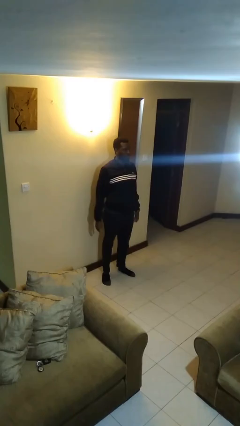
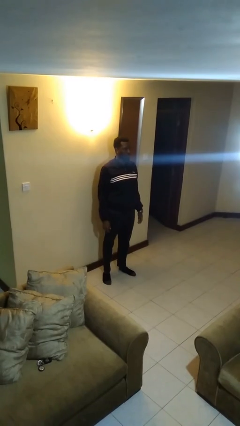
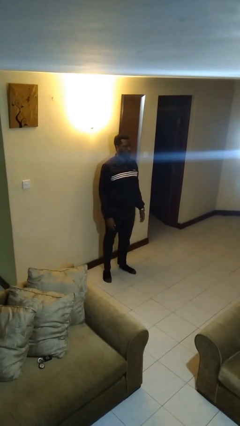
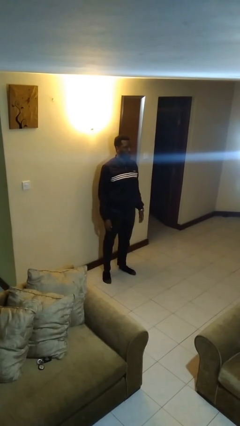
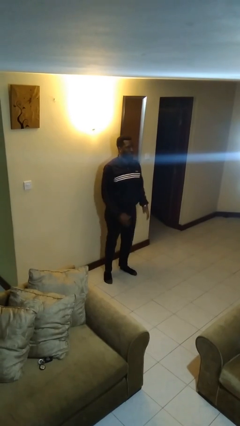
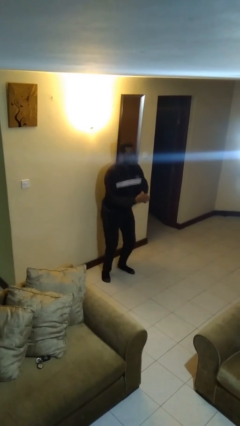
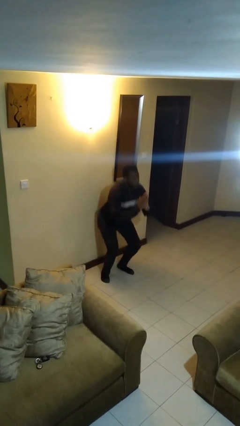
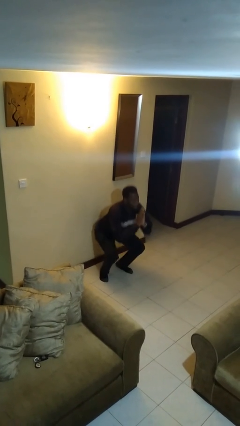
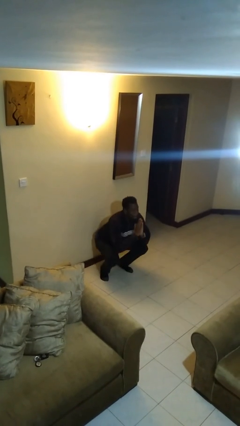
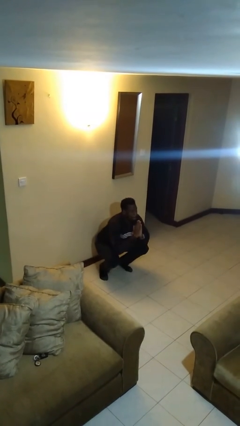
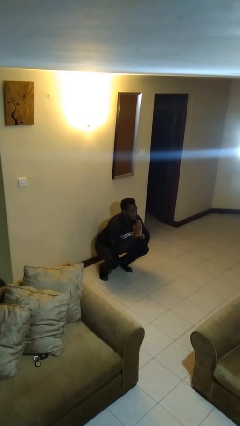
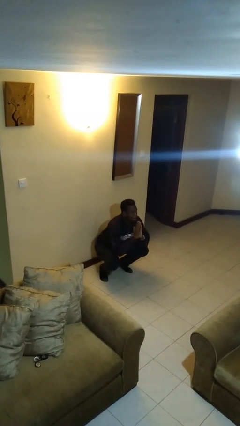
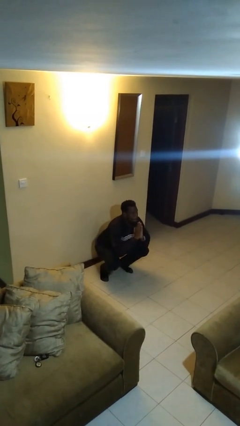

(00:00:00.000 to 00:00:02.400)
person squats

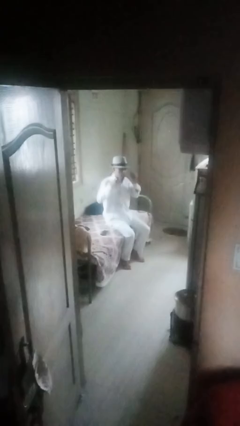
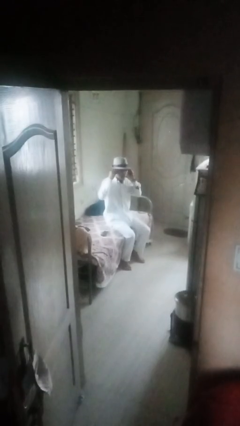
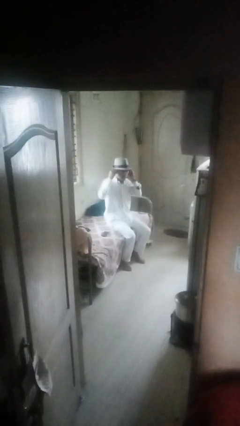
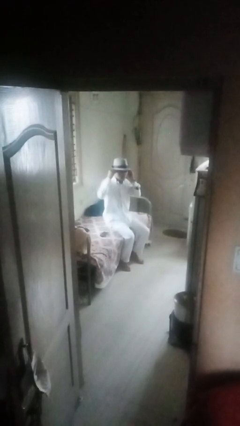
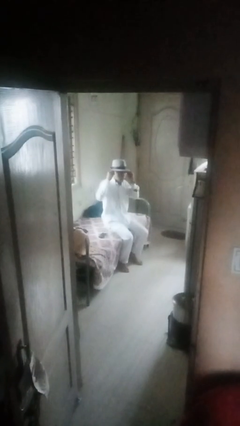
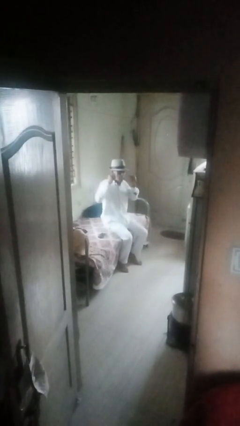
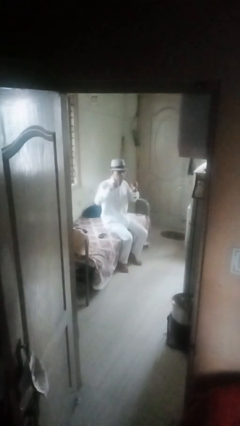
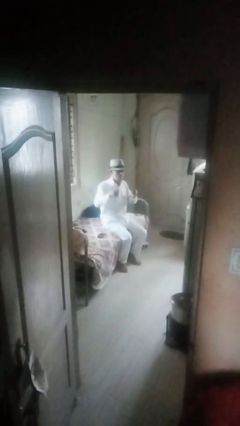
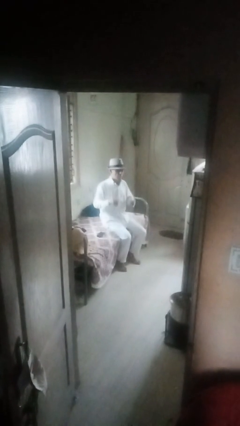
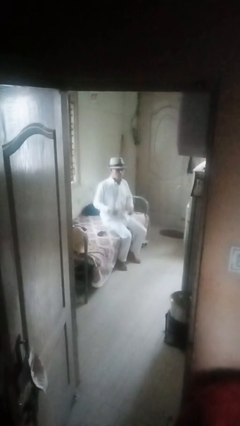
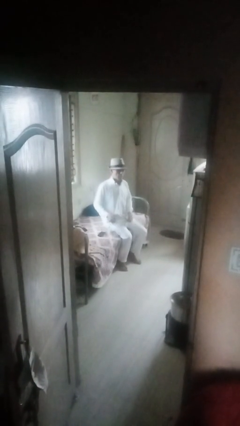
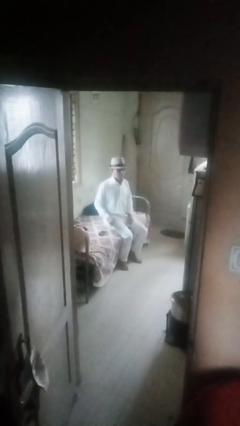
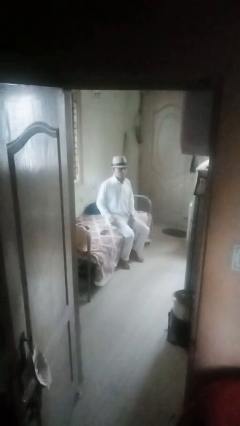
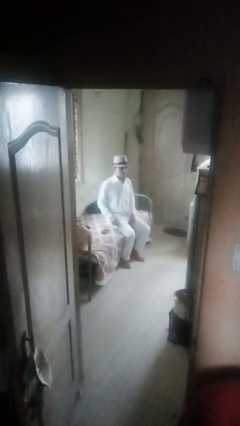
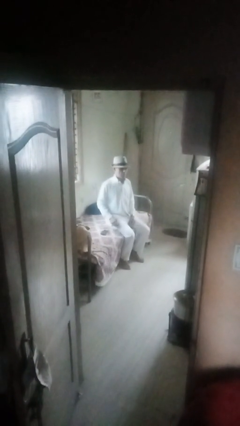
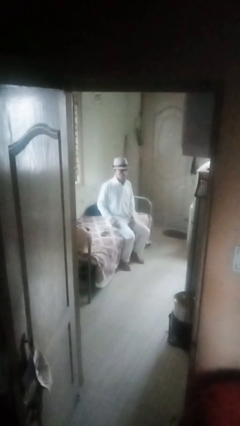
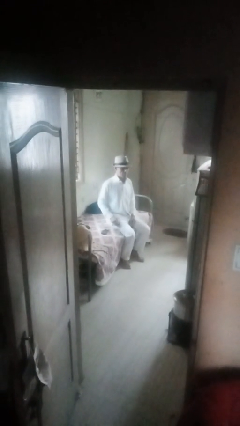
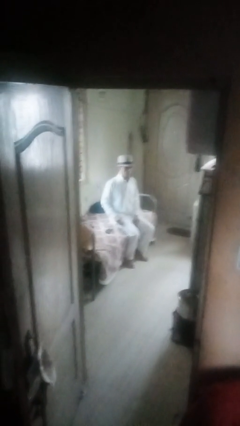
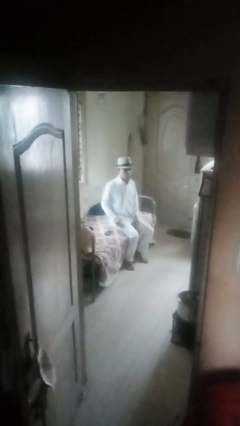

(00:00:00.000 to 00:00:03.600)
person takes off headphones

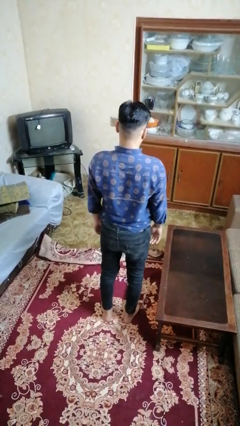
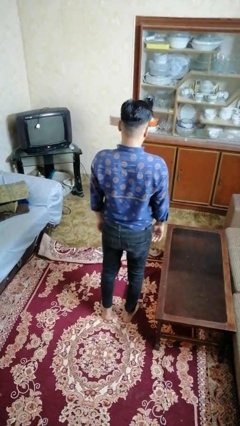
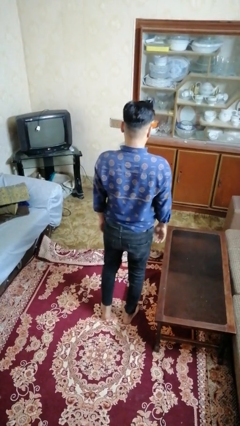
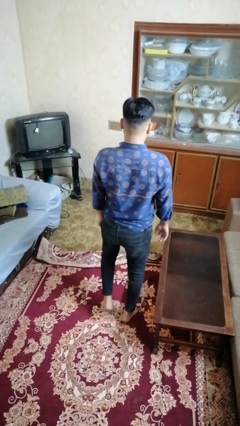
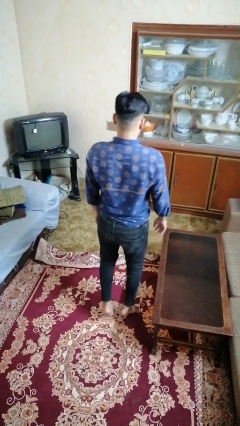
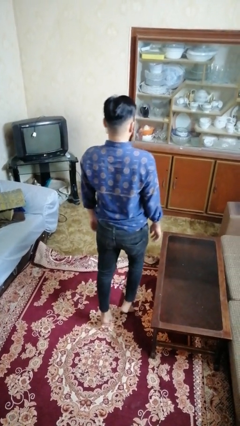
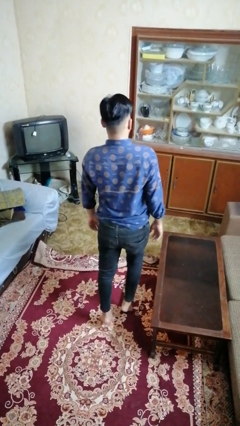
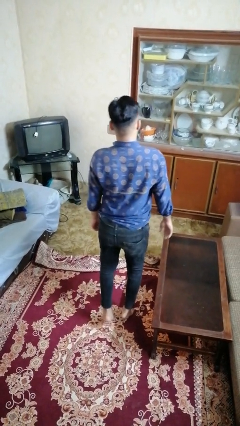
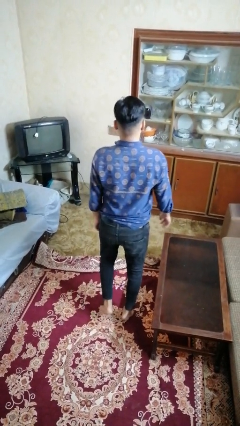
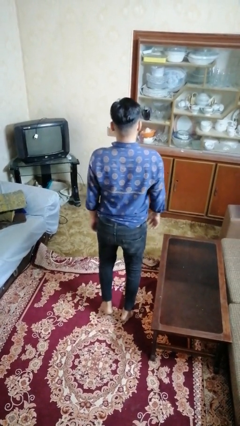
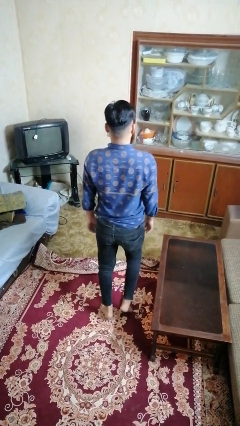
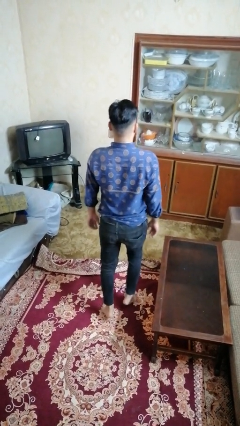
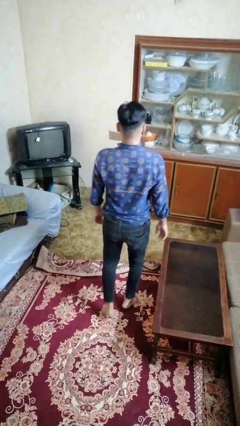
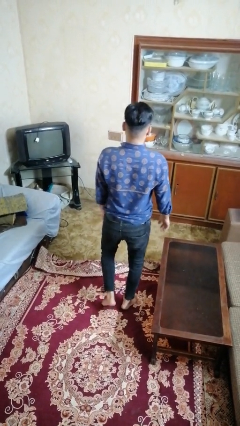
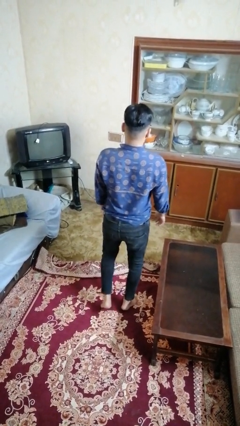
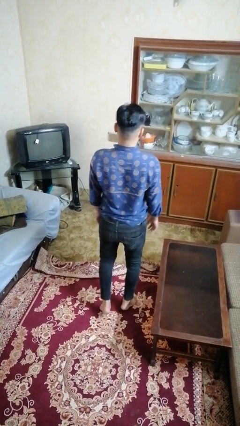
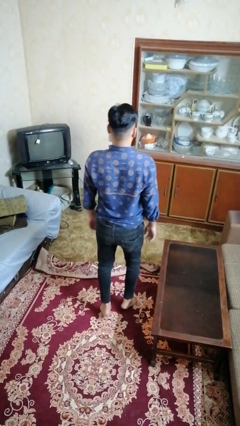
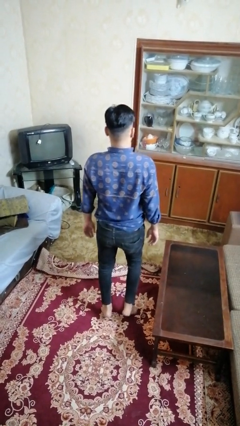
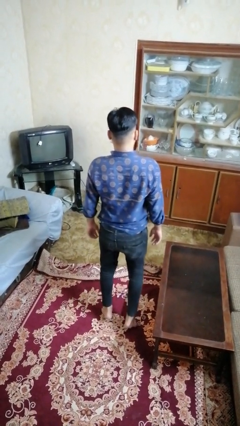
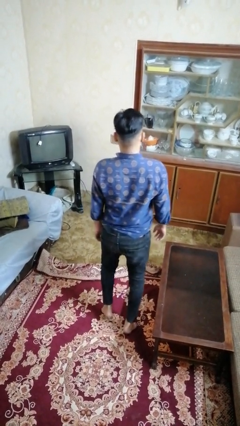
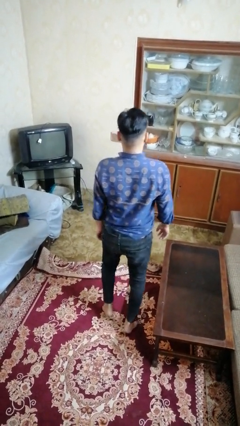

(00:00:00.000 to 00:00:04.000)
person walks tiptoe

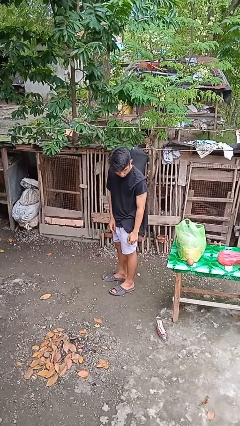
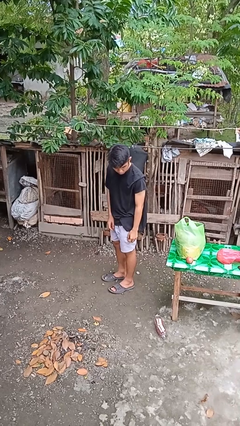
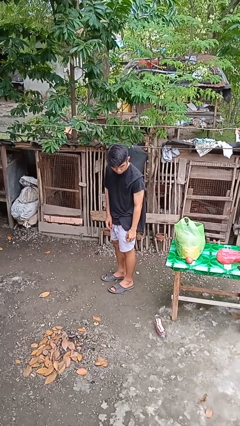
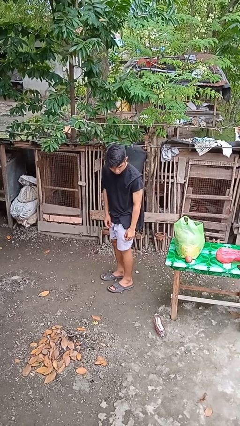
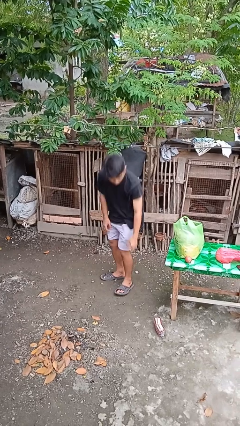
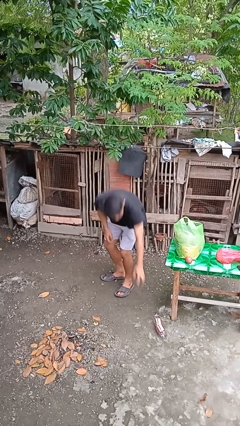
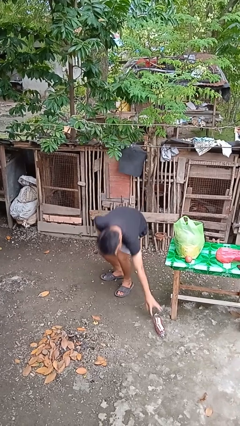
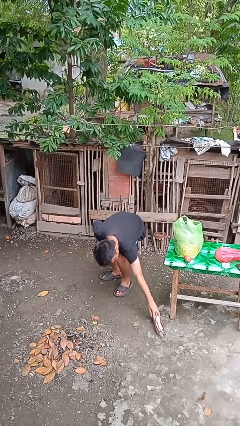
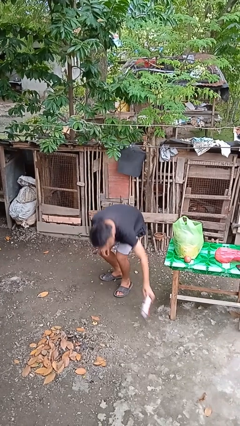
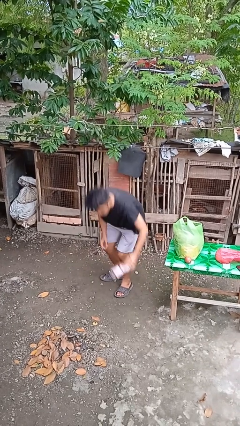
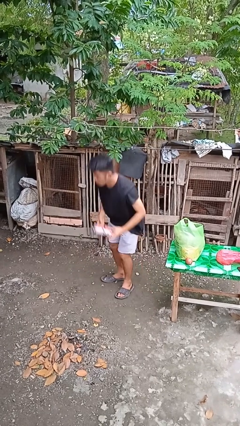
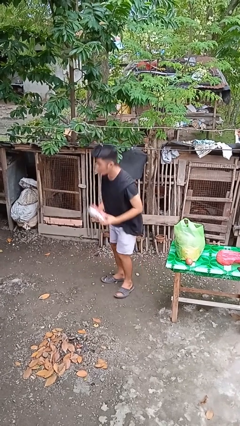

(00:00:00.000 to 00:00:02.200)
person picks up object from floor

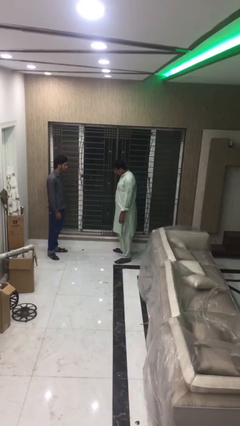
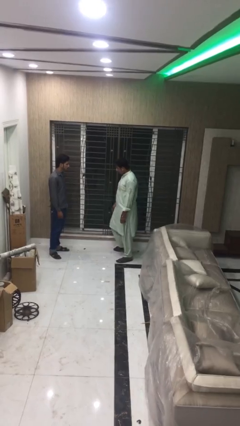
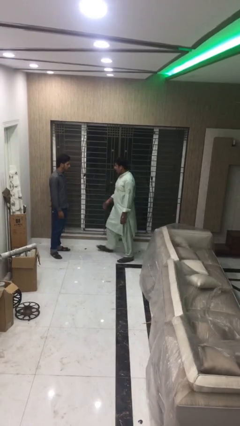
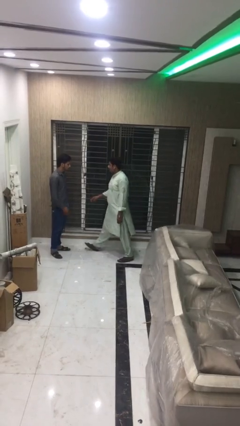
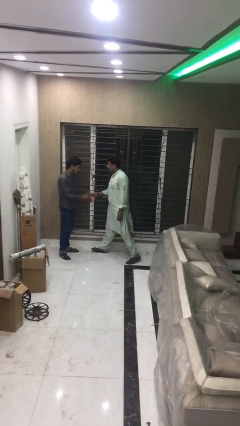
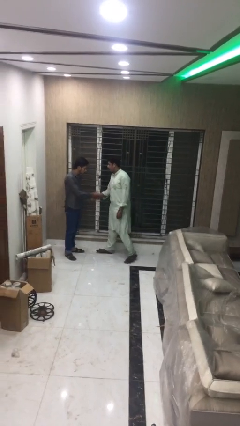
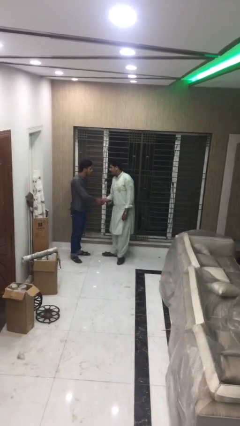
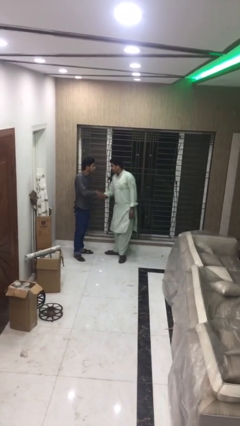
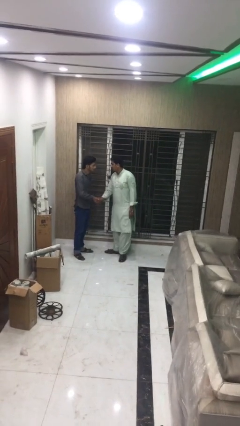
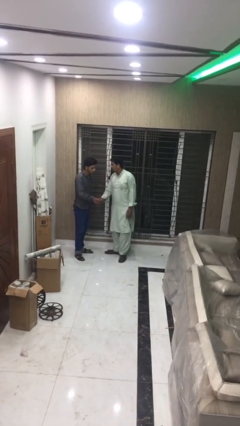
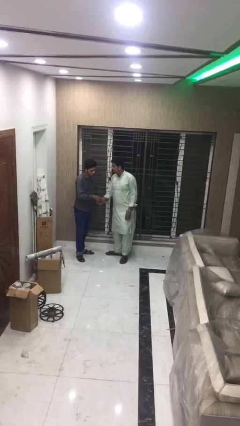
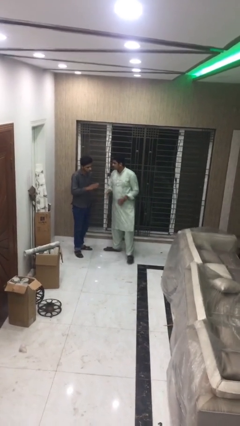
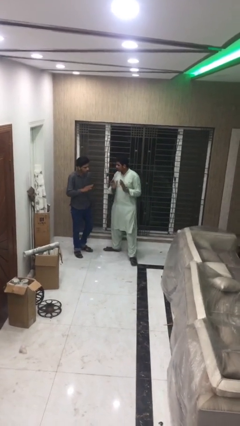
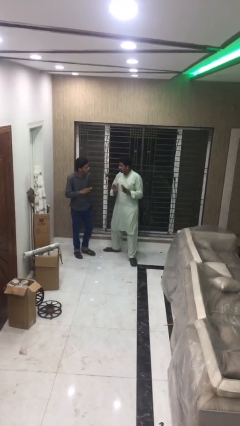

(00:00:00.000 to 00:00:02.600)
person shakes hand

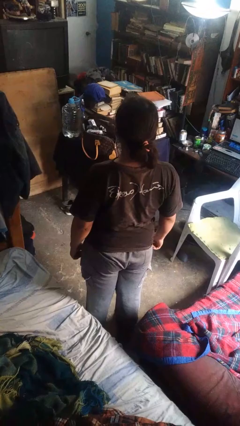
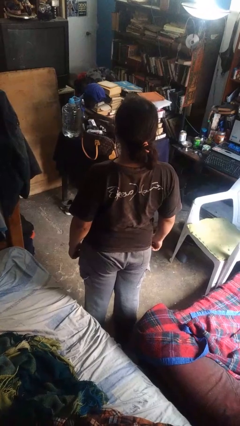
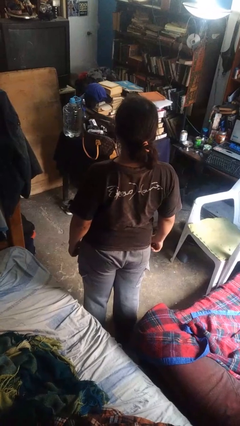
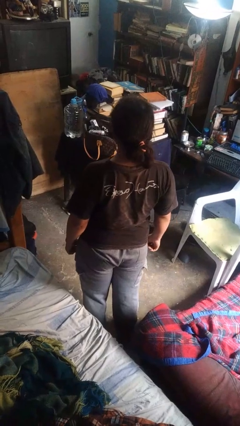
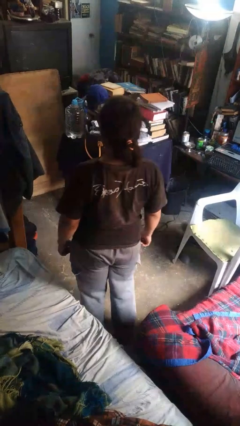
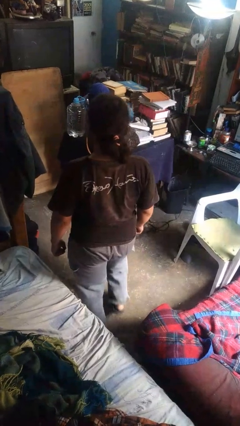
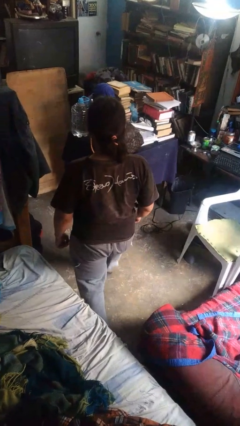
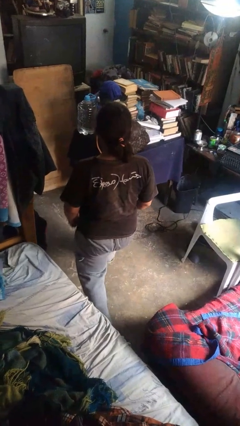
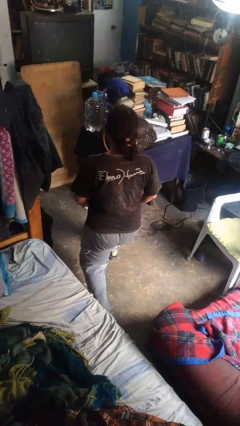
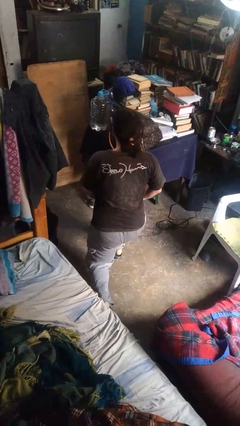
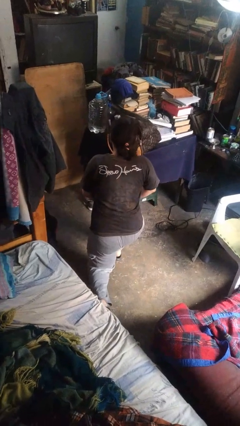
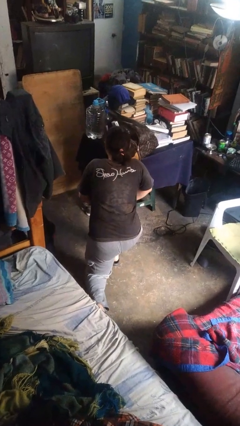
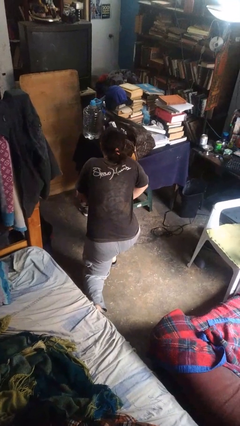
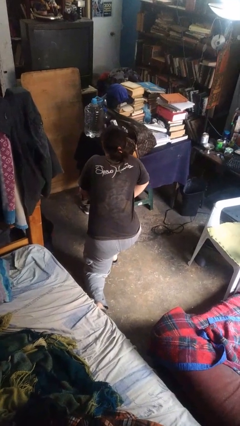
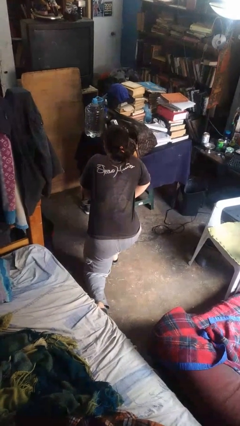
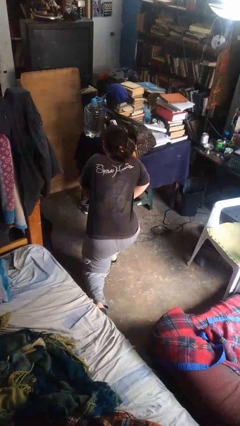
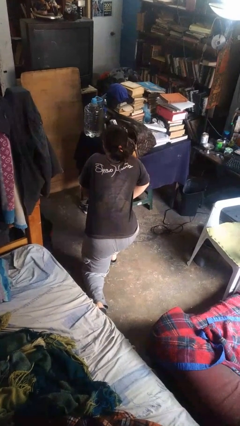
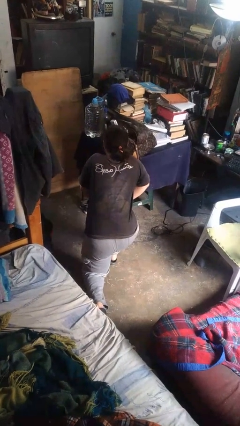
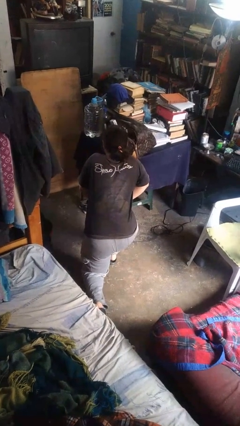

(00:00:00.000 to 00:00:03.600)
person kneels
